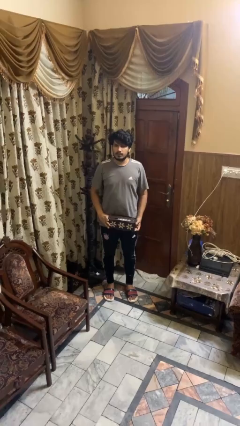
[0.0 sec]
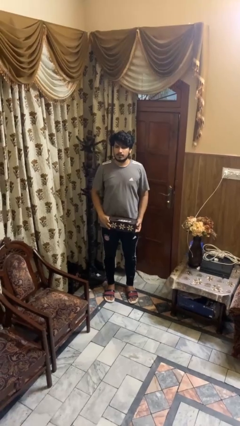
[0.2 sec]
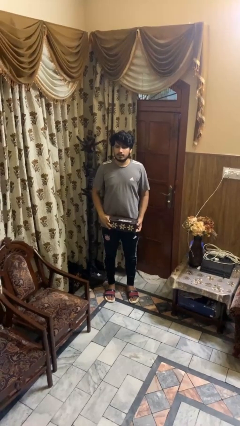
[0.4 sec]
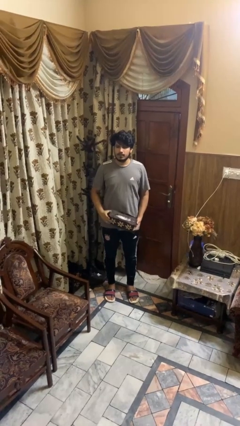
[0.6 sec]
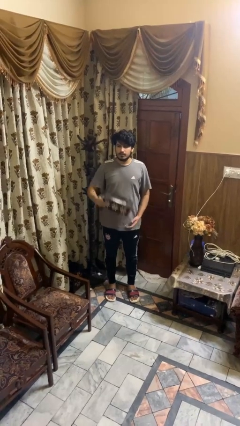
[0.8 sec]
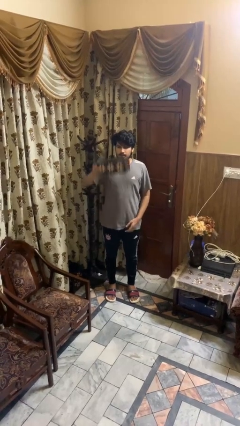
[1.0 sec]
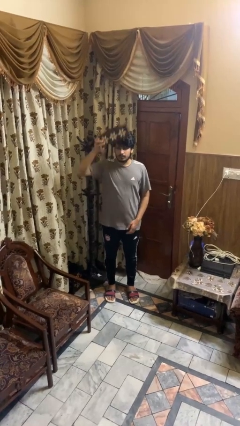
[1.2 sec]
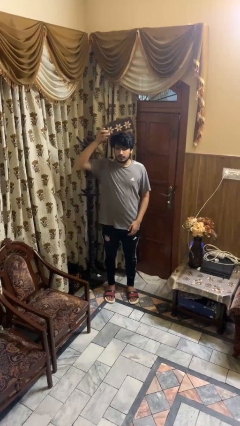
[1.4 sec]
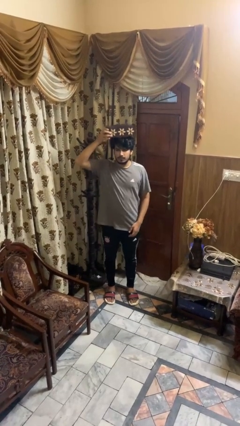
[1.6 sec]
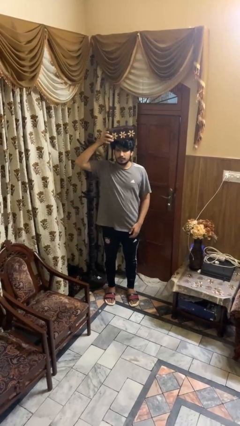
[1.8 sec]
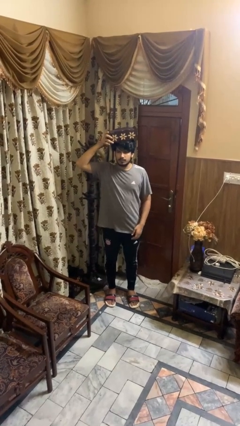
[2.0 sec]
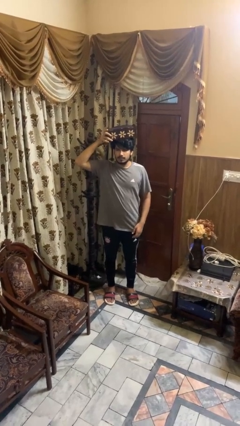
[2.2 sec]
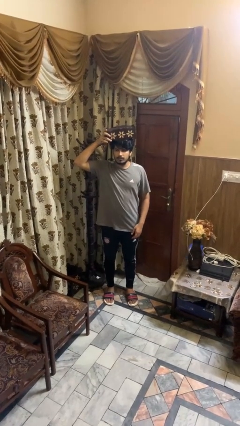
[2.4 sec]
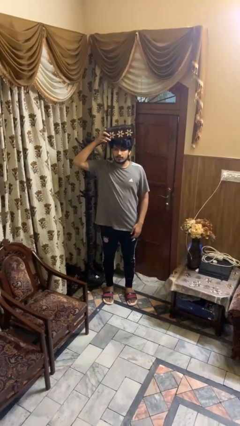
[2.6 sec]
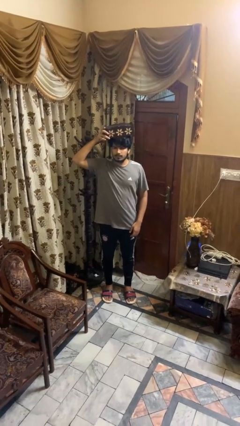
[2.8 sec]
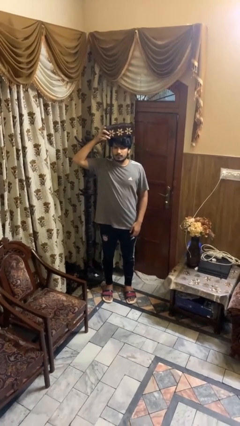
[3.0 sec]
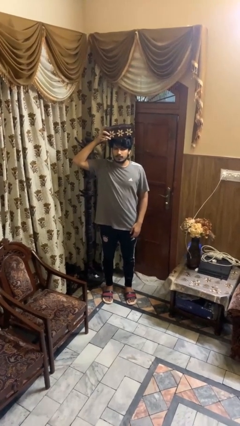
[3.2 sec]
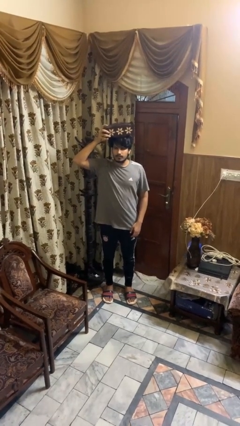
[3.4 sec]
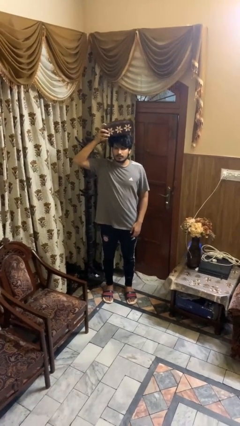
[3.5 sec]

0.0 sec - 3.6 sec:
person holds object above head

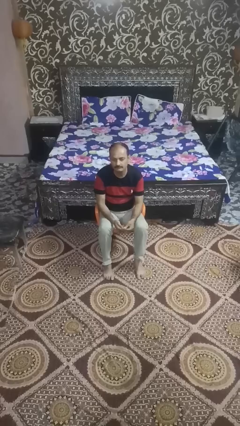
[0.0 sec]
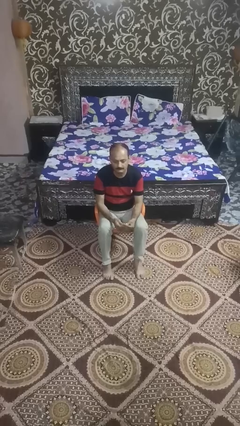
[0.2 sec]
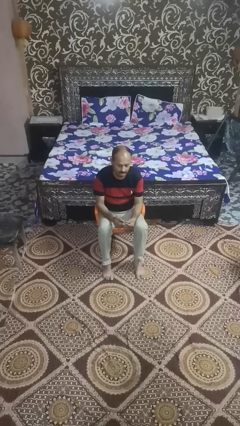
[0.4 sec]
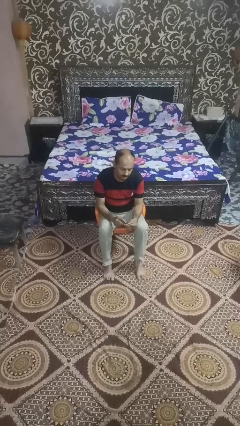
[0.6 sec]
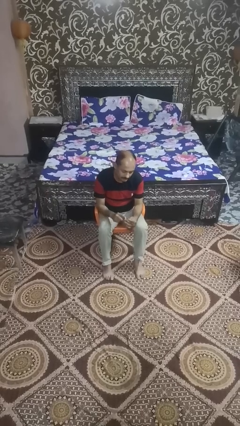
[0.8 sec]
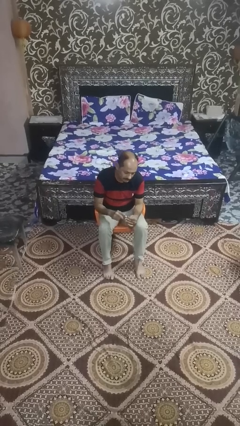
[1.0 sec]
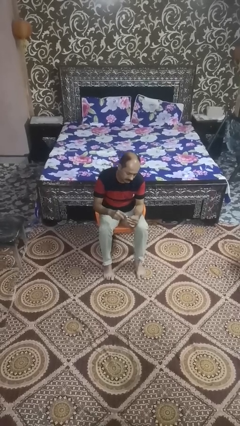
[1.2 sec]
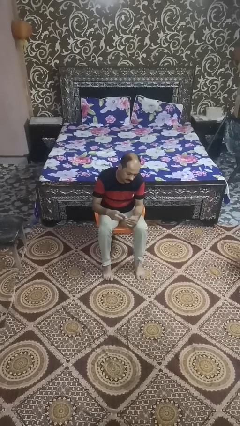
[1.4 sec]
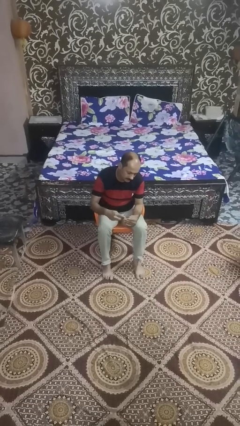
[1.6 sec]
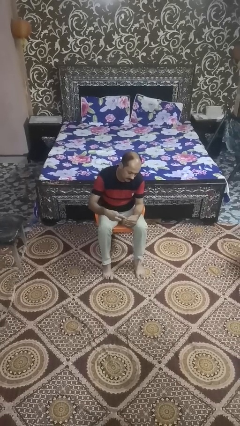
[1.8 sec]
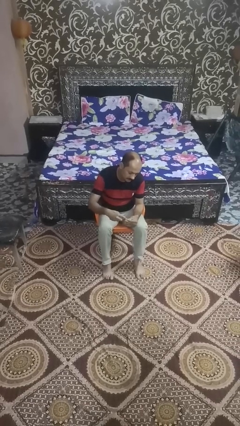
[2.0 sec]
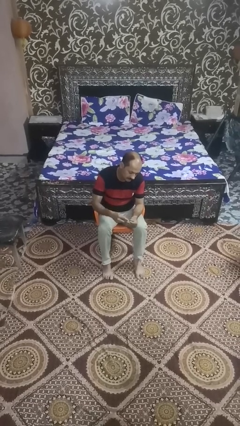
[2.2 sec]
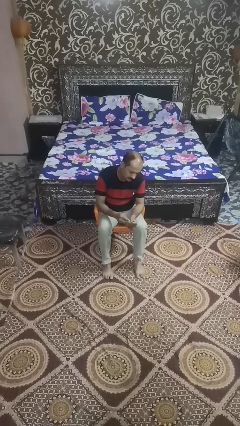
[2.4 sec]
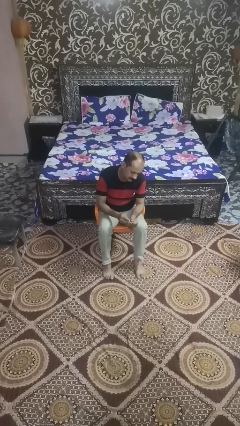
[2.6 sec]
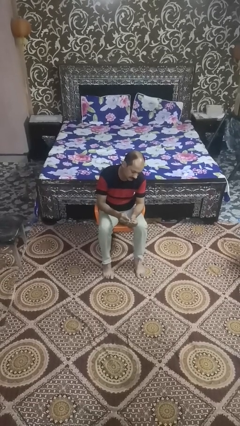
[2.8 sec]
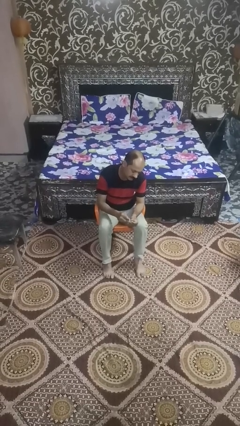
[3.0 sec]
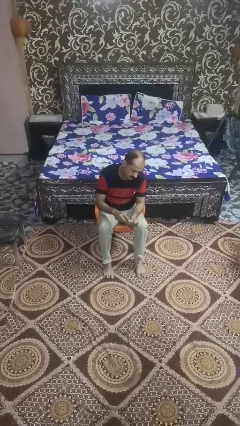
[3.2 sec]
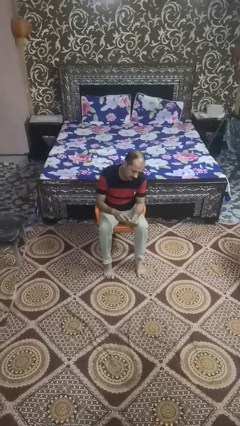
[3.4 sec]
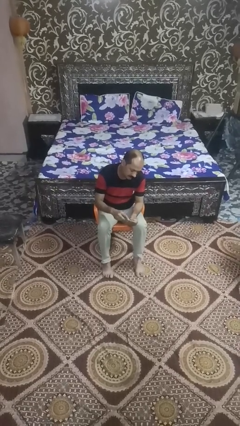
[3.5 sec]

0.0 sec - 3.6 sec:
person files fingernails

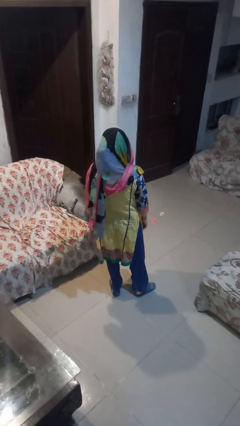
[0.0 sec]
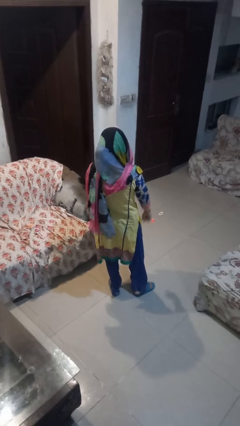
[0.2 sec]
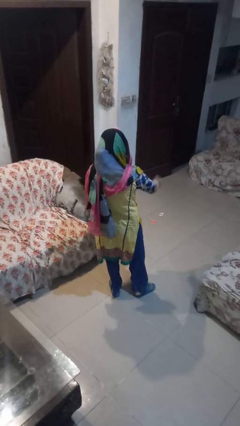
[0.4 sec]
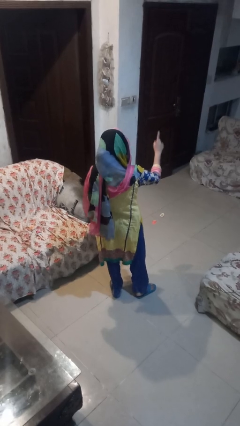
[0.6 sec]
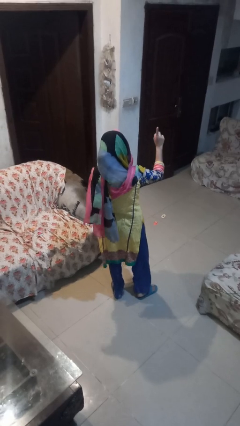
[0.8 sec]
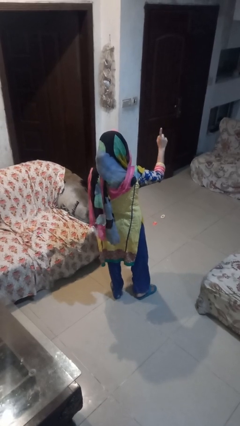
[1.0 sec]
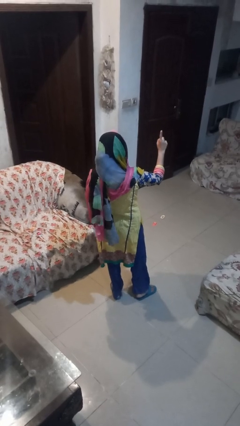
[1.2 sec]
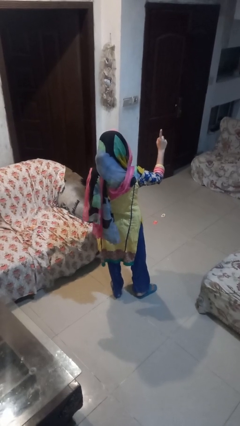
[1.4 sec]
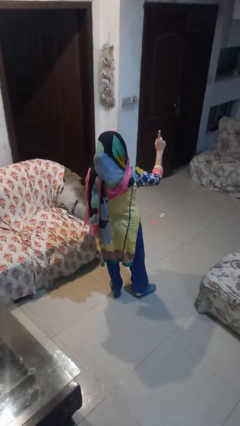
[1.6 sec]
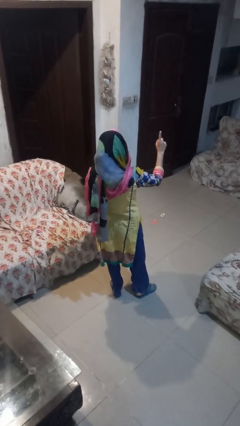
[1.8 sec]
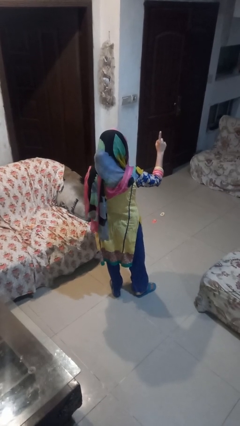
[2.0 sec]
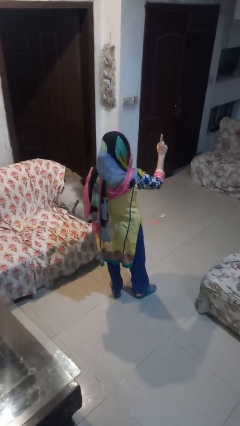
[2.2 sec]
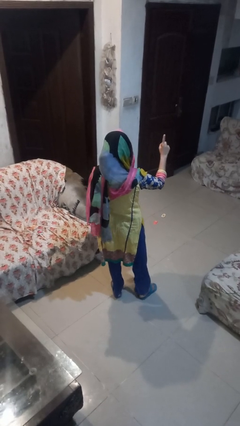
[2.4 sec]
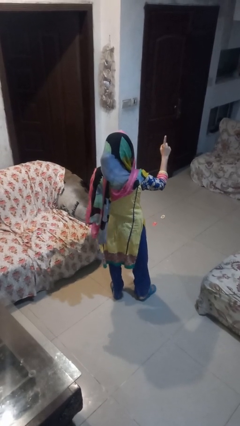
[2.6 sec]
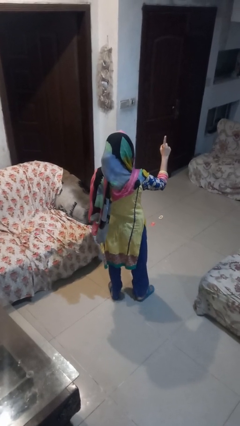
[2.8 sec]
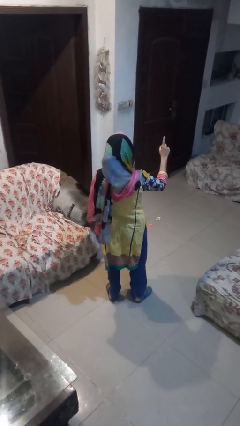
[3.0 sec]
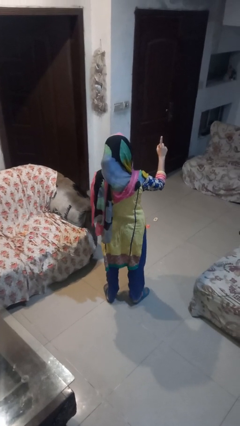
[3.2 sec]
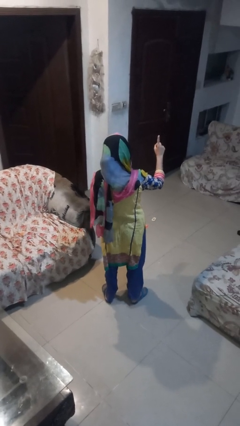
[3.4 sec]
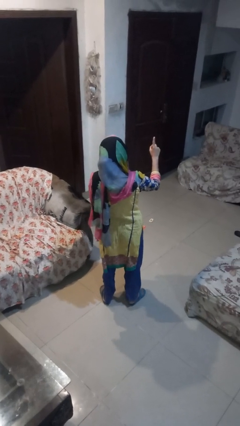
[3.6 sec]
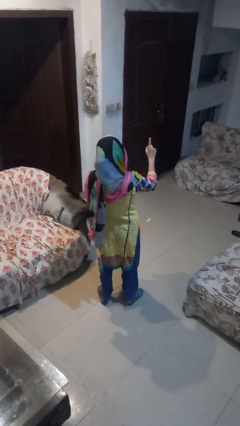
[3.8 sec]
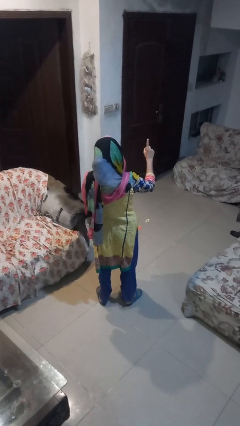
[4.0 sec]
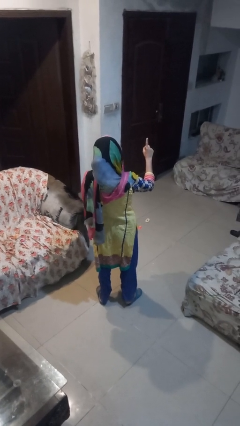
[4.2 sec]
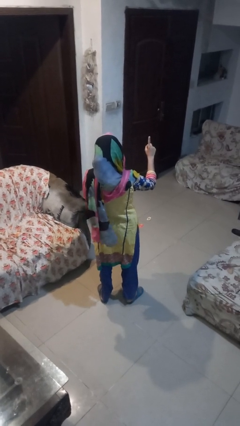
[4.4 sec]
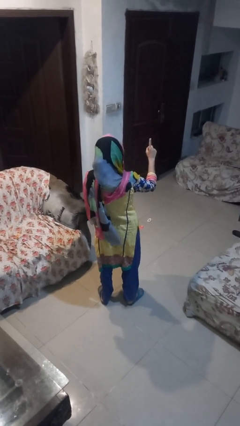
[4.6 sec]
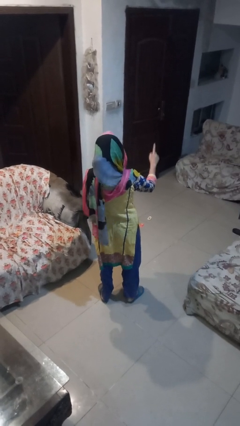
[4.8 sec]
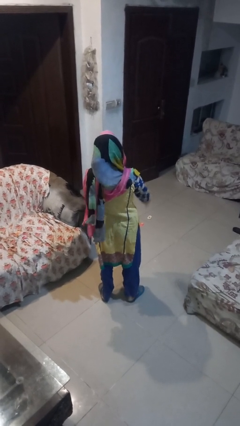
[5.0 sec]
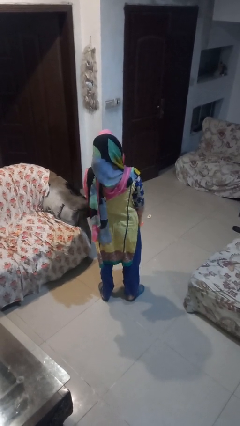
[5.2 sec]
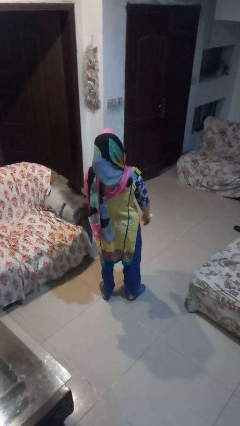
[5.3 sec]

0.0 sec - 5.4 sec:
person gestures number one

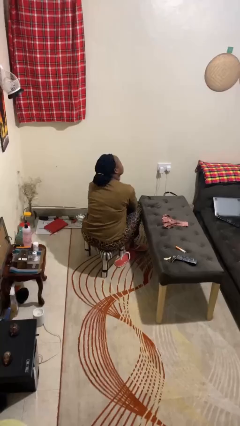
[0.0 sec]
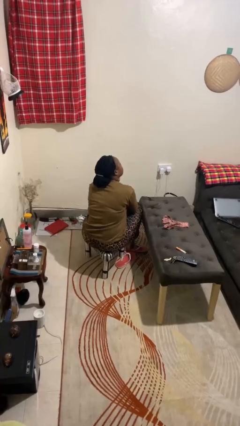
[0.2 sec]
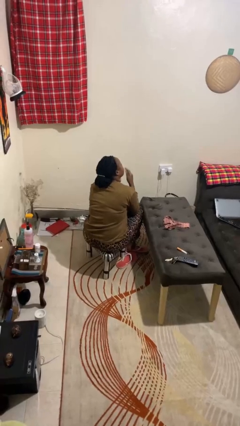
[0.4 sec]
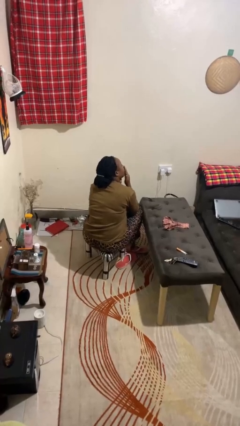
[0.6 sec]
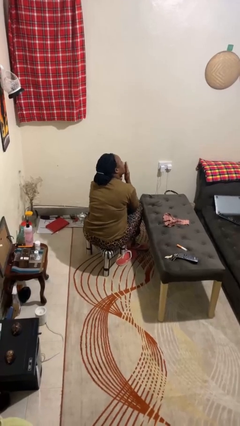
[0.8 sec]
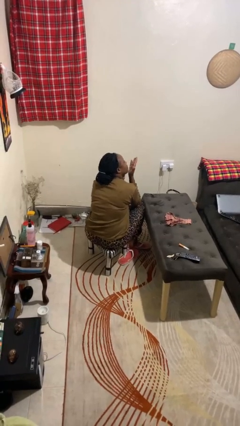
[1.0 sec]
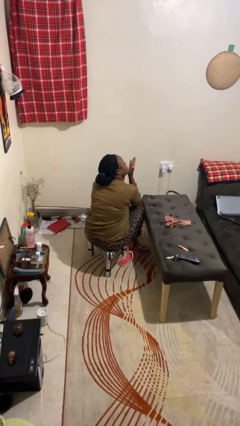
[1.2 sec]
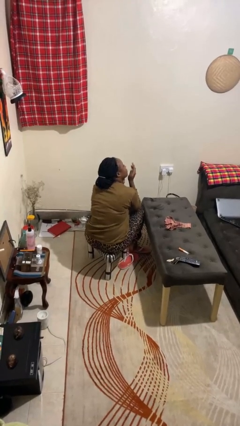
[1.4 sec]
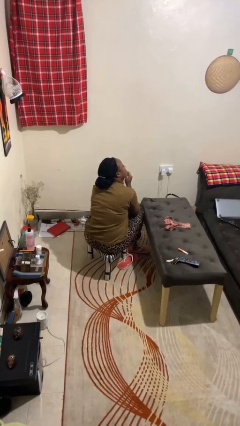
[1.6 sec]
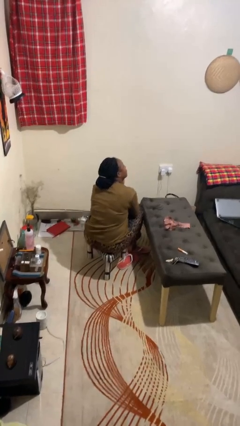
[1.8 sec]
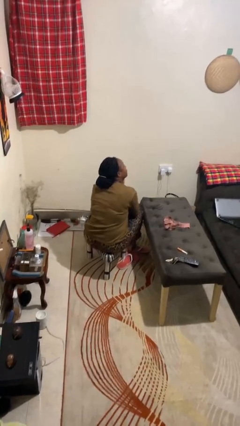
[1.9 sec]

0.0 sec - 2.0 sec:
person gestures blow kiss

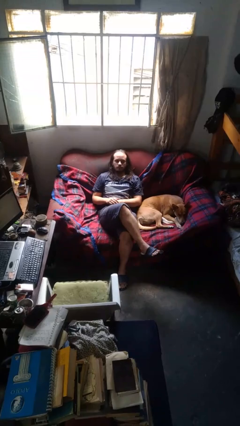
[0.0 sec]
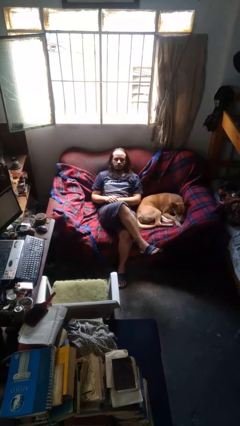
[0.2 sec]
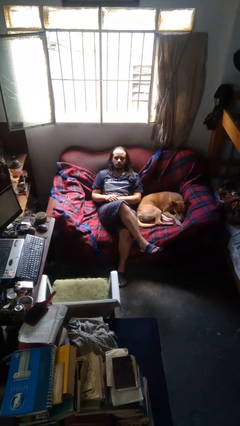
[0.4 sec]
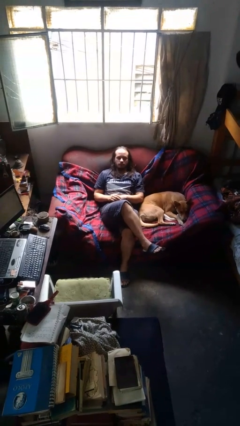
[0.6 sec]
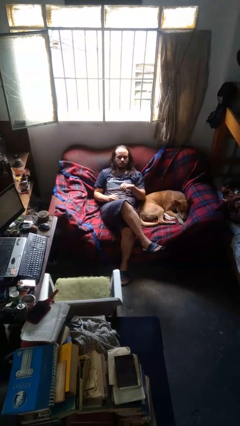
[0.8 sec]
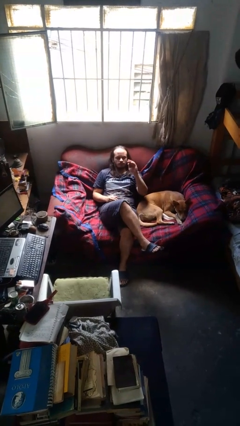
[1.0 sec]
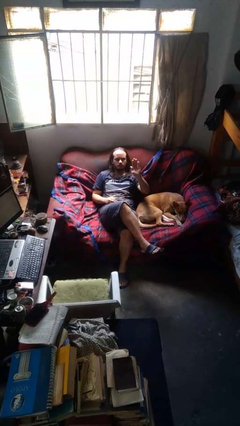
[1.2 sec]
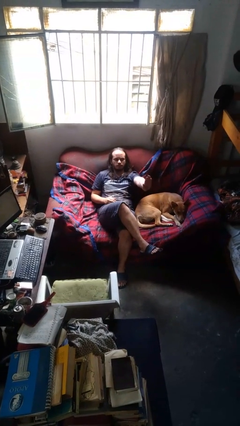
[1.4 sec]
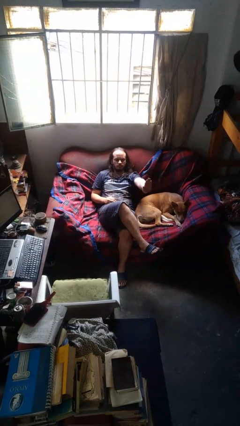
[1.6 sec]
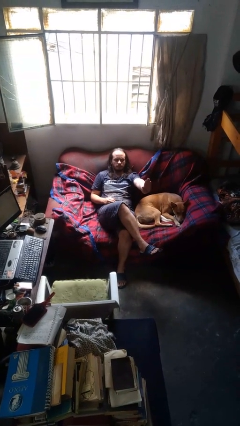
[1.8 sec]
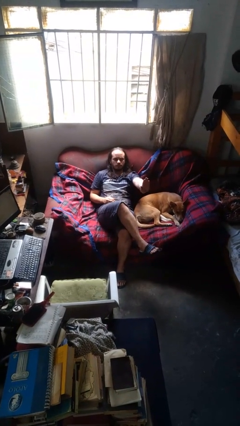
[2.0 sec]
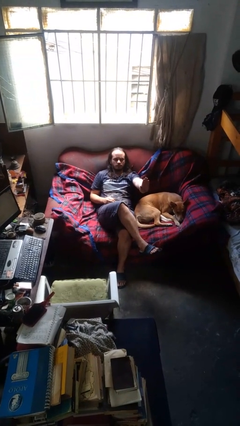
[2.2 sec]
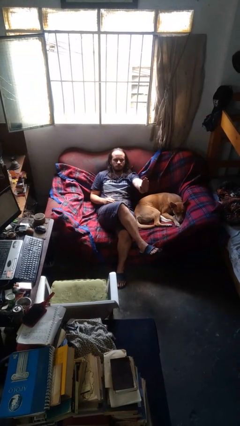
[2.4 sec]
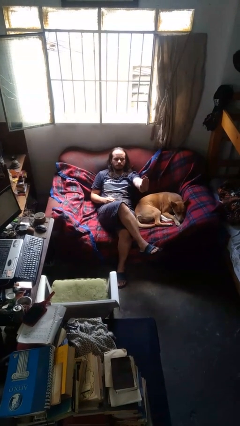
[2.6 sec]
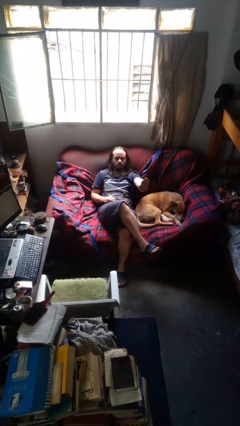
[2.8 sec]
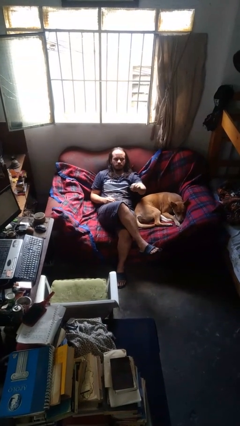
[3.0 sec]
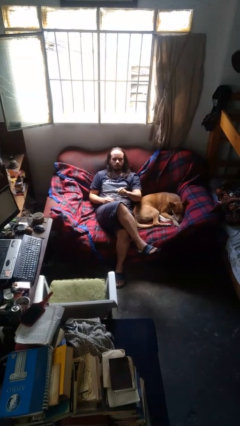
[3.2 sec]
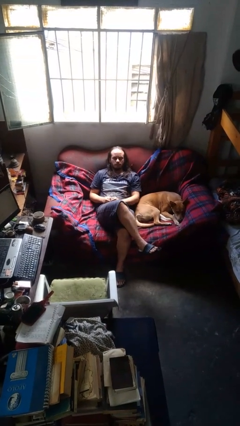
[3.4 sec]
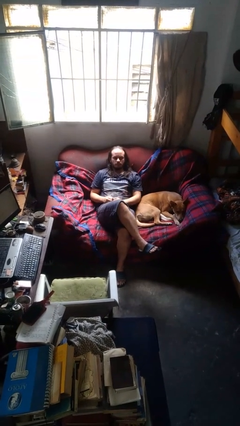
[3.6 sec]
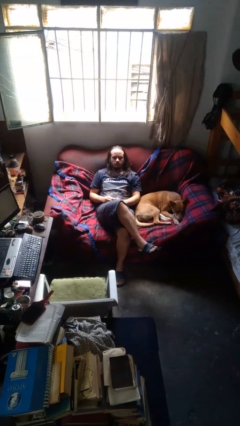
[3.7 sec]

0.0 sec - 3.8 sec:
person gestures stop
